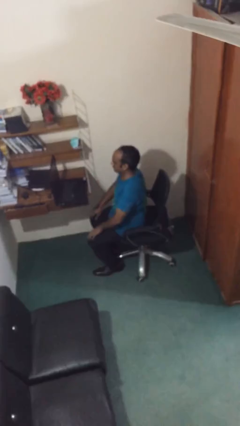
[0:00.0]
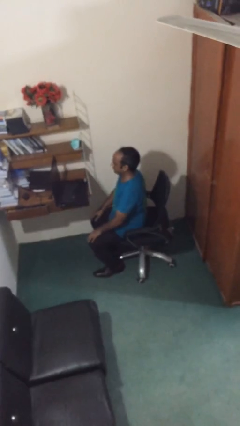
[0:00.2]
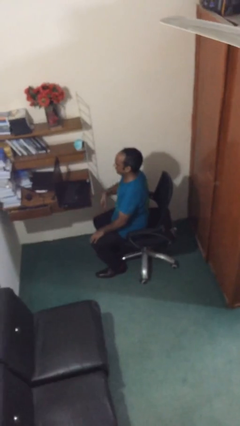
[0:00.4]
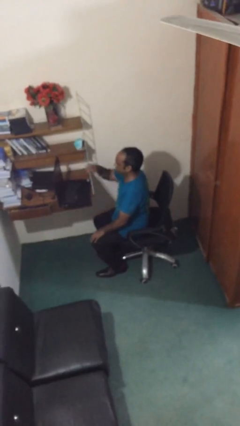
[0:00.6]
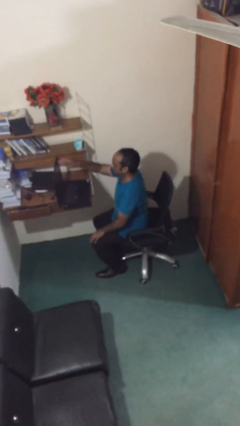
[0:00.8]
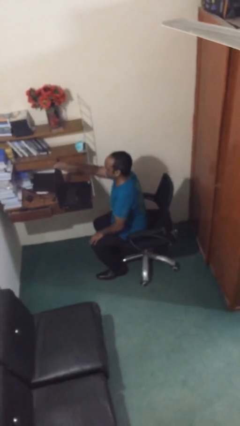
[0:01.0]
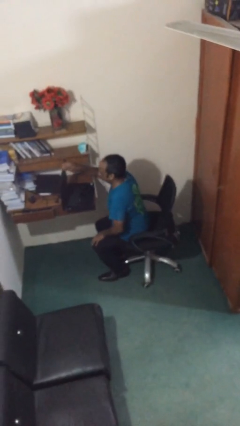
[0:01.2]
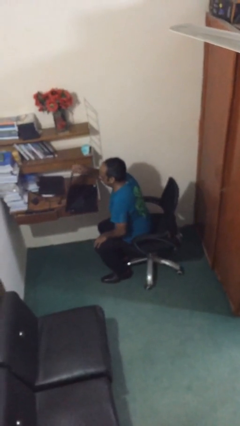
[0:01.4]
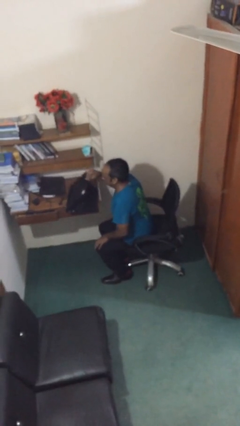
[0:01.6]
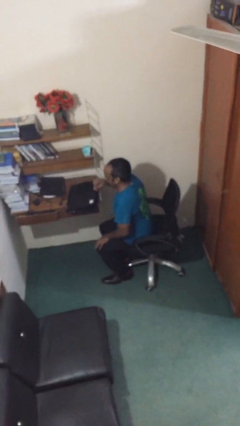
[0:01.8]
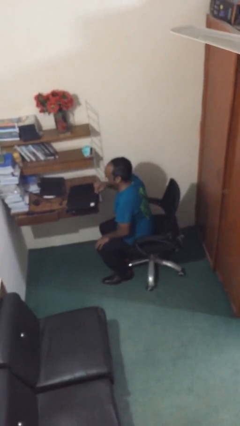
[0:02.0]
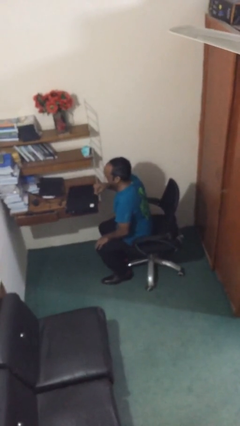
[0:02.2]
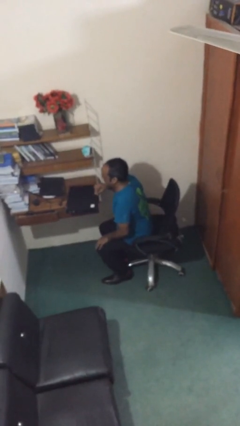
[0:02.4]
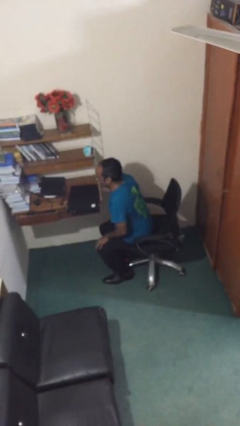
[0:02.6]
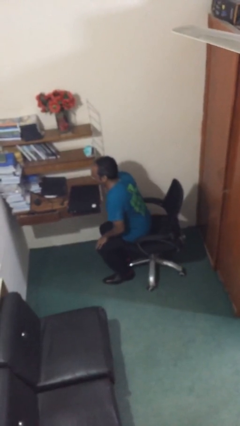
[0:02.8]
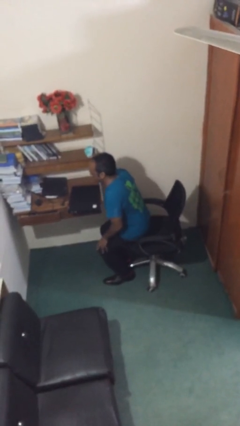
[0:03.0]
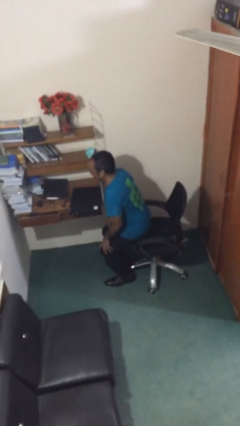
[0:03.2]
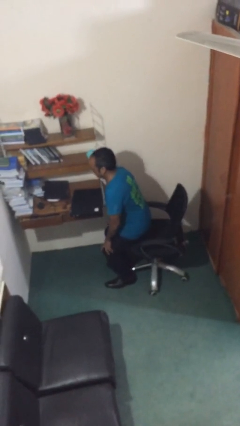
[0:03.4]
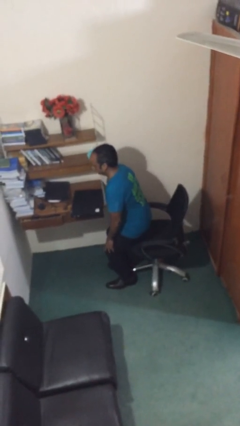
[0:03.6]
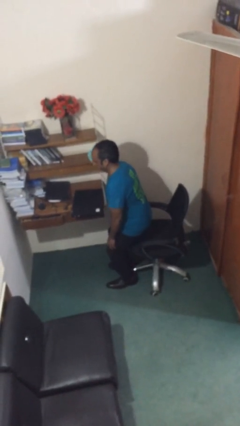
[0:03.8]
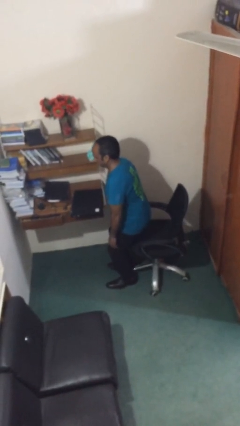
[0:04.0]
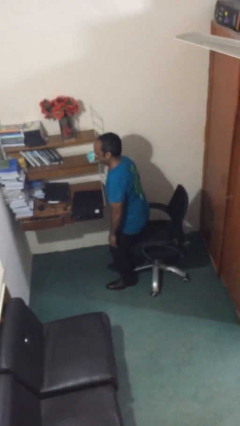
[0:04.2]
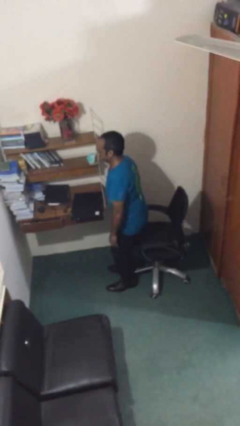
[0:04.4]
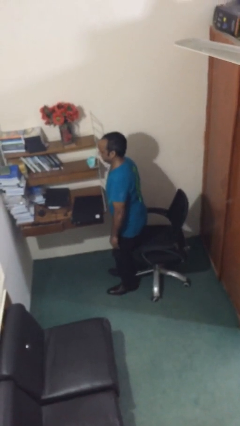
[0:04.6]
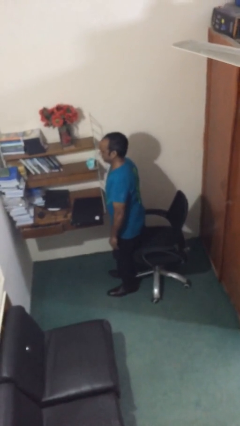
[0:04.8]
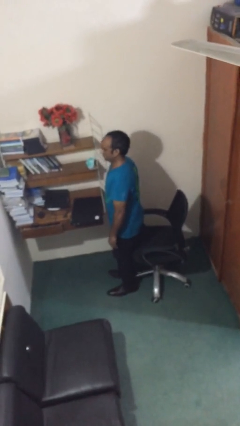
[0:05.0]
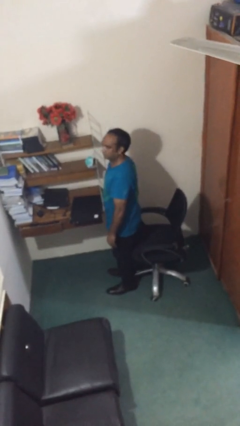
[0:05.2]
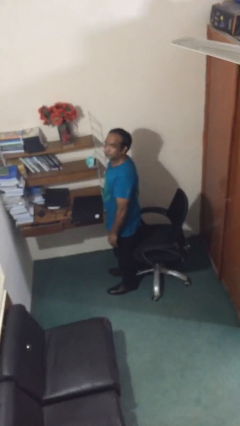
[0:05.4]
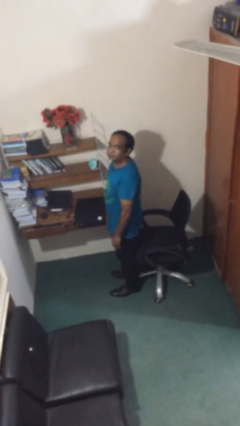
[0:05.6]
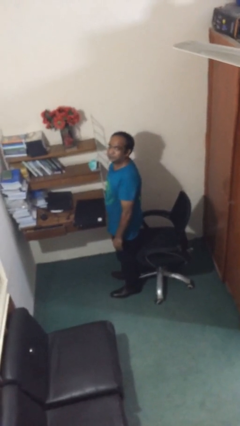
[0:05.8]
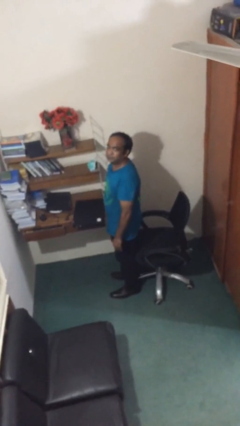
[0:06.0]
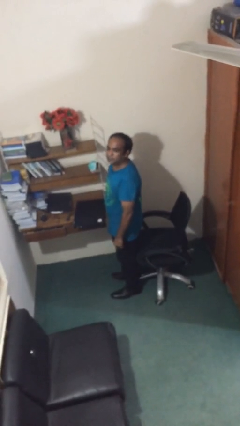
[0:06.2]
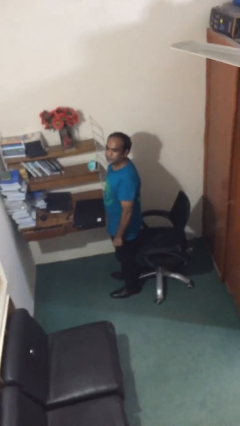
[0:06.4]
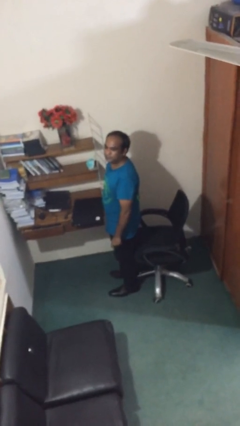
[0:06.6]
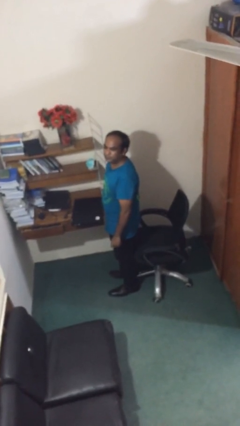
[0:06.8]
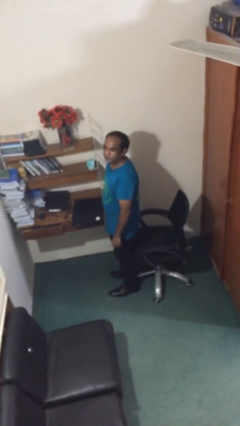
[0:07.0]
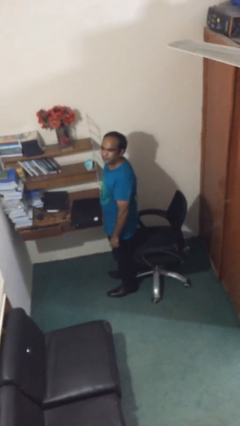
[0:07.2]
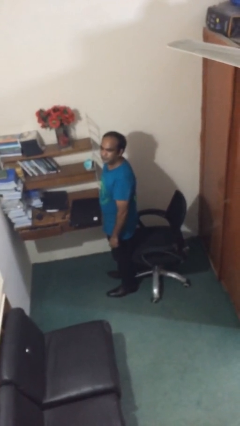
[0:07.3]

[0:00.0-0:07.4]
person stands up

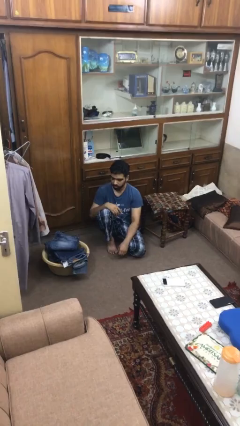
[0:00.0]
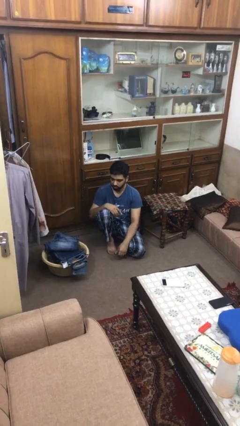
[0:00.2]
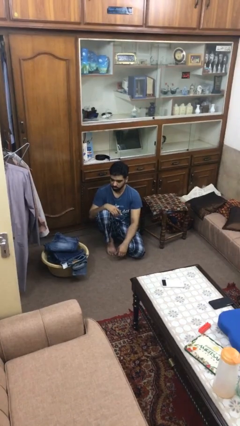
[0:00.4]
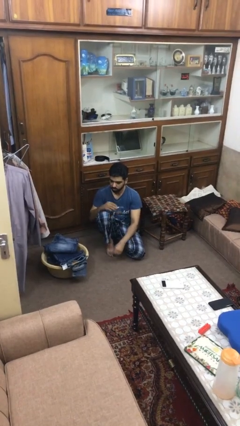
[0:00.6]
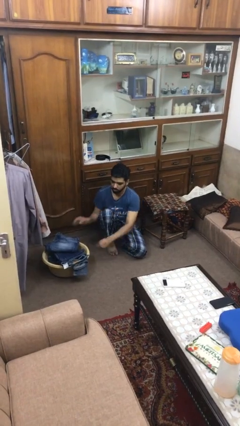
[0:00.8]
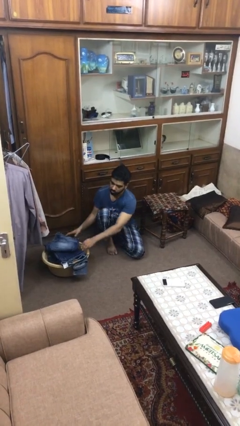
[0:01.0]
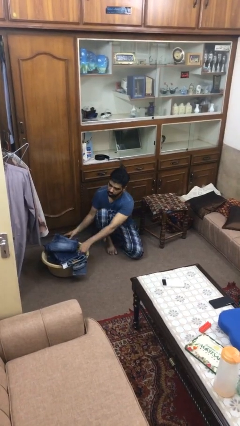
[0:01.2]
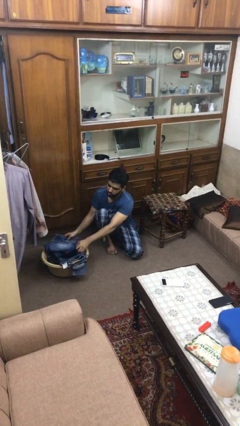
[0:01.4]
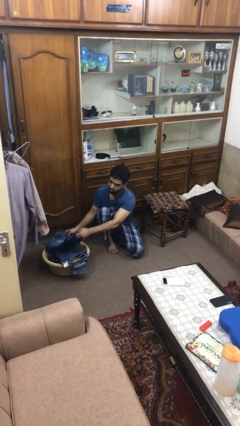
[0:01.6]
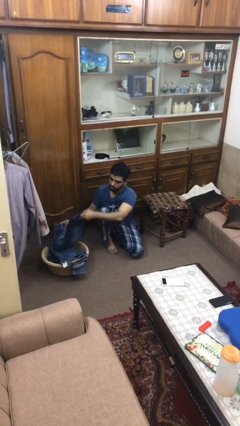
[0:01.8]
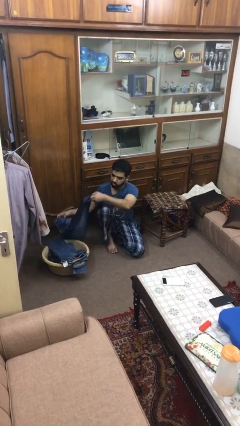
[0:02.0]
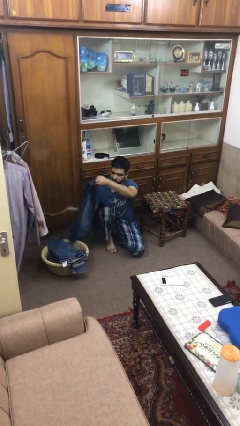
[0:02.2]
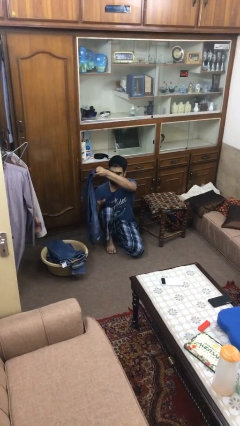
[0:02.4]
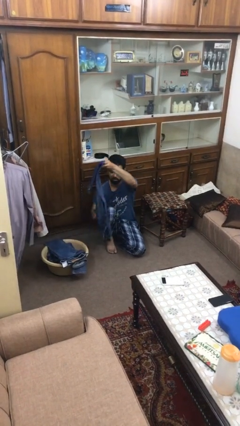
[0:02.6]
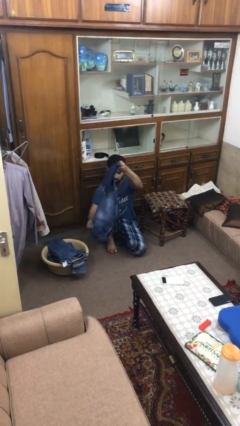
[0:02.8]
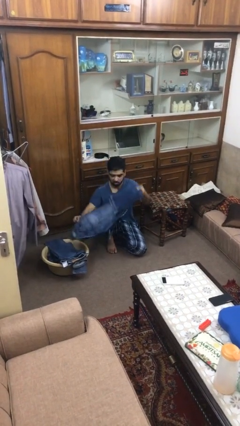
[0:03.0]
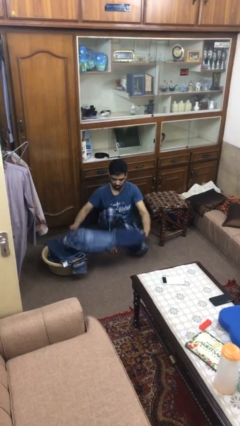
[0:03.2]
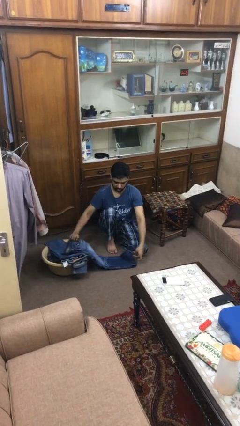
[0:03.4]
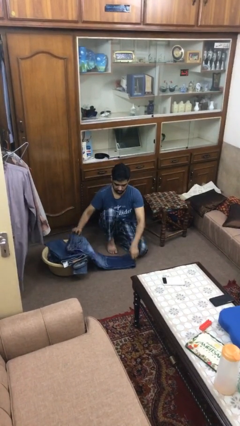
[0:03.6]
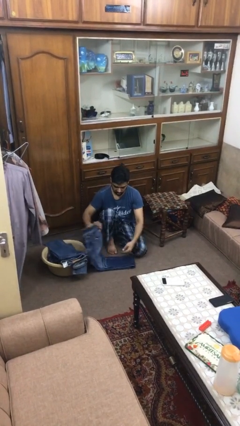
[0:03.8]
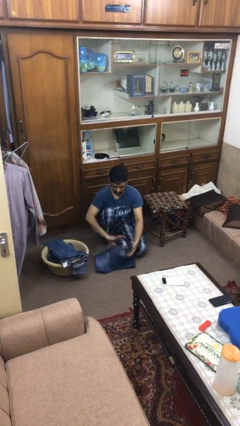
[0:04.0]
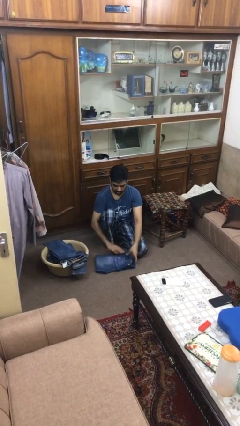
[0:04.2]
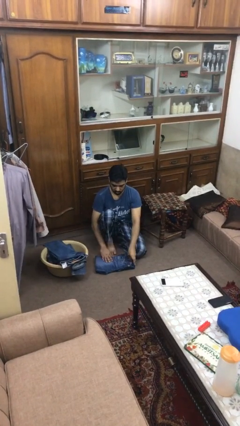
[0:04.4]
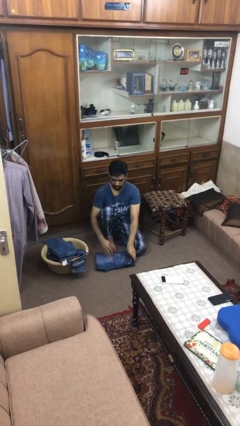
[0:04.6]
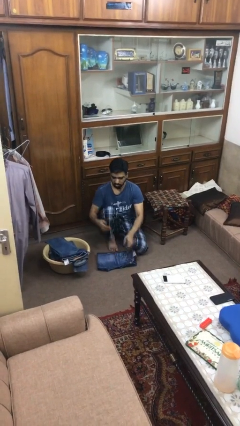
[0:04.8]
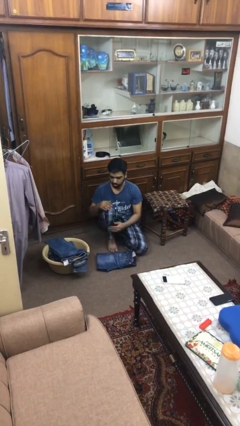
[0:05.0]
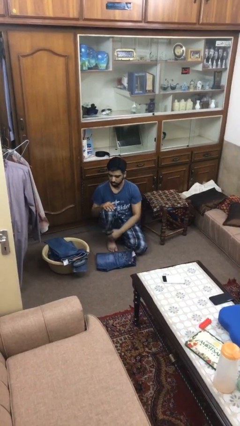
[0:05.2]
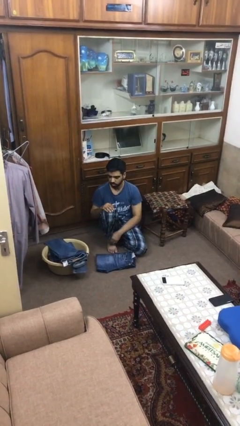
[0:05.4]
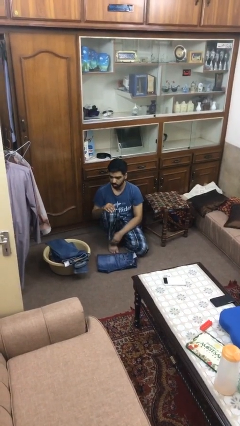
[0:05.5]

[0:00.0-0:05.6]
person folds pants

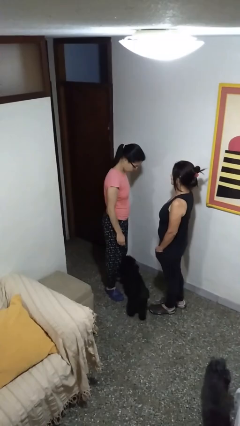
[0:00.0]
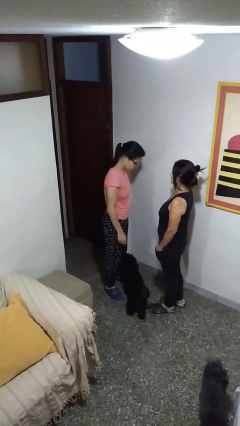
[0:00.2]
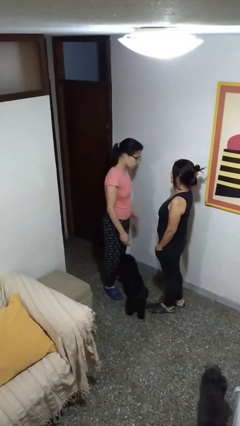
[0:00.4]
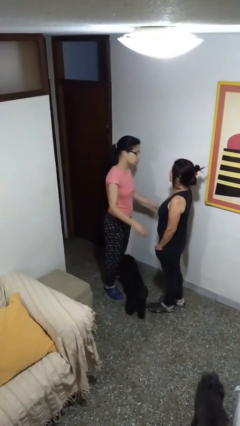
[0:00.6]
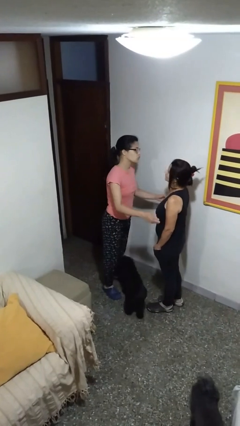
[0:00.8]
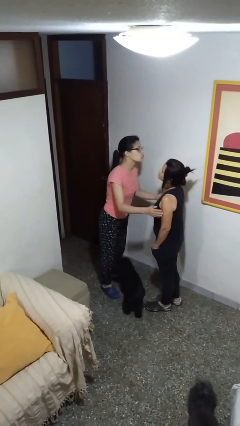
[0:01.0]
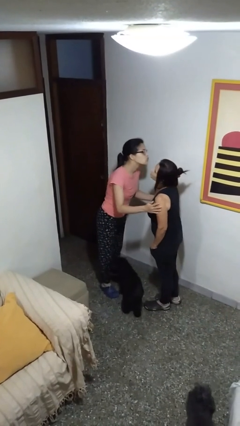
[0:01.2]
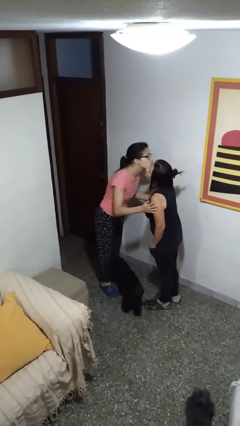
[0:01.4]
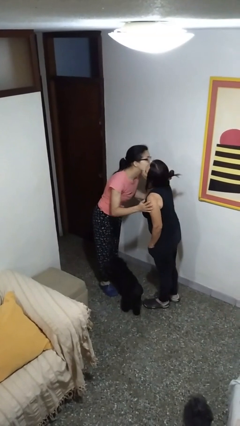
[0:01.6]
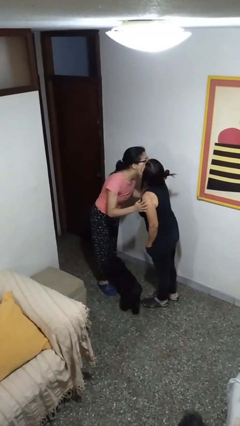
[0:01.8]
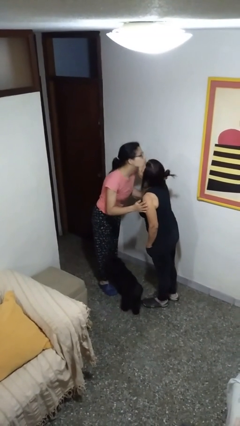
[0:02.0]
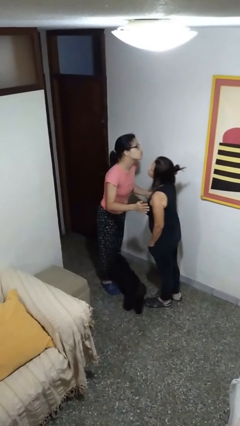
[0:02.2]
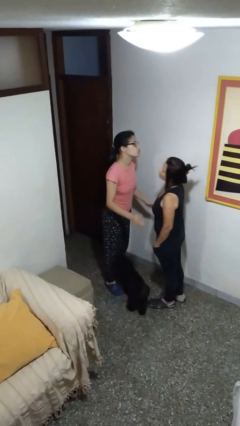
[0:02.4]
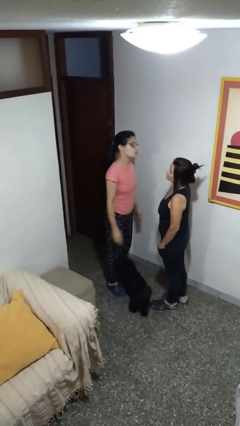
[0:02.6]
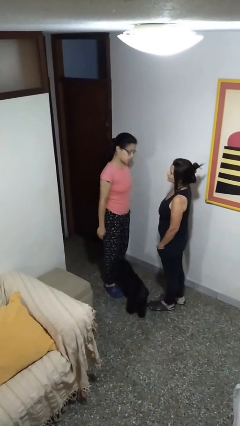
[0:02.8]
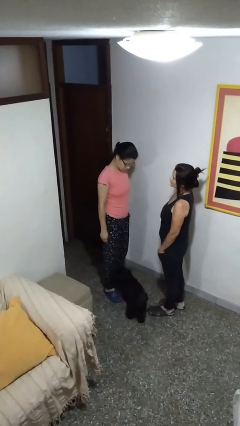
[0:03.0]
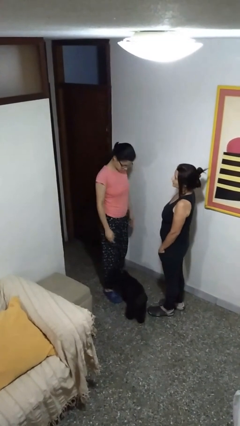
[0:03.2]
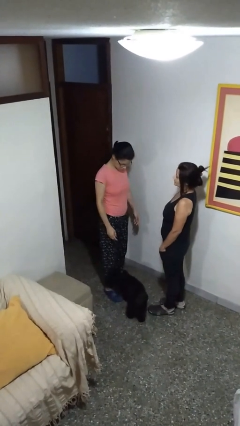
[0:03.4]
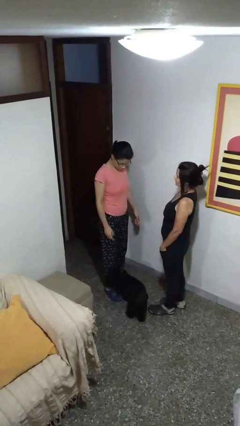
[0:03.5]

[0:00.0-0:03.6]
person kisses cheek of person

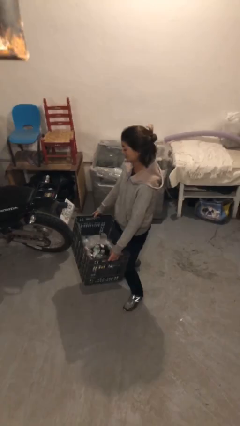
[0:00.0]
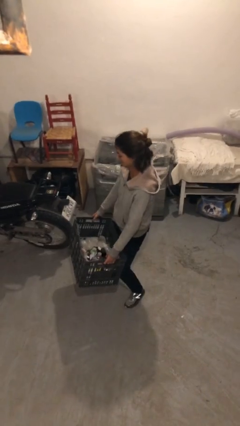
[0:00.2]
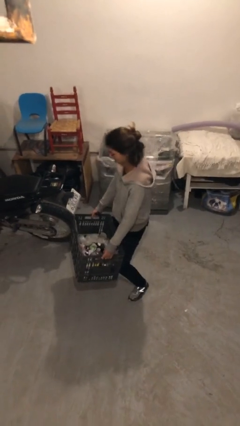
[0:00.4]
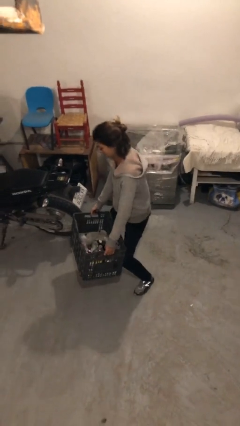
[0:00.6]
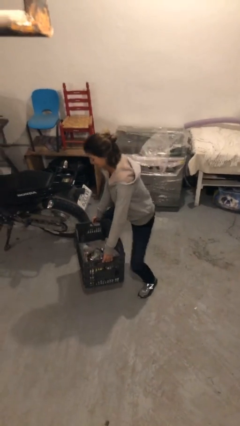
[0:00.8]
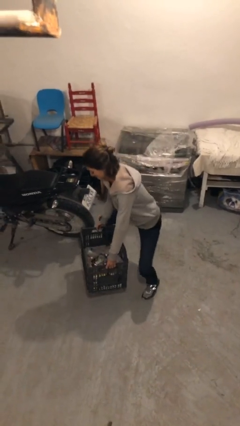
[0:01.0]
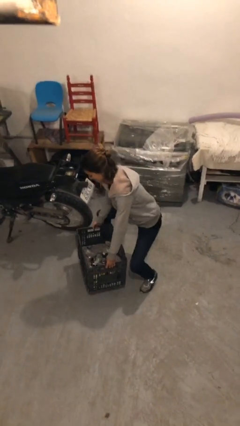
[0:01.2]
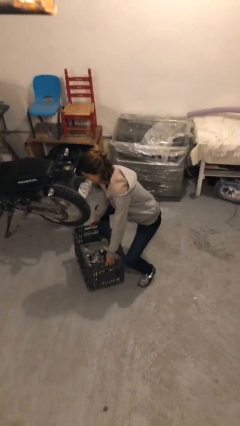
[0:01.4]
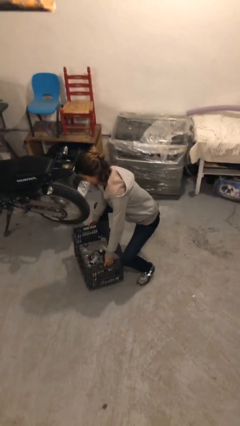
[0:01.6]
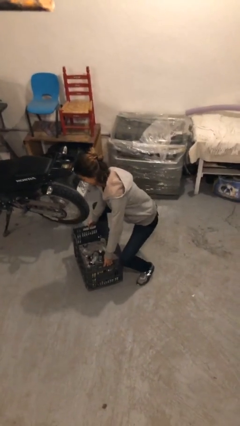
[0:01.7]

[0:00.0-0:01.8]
person puts down object on floor
